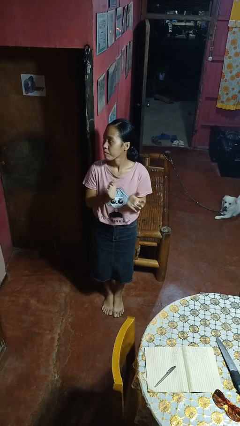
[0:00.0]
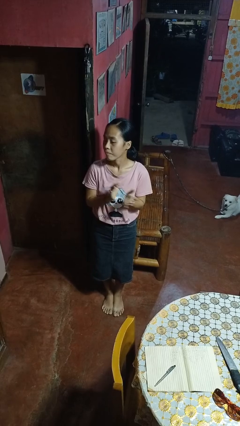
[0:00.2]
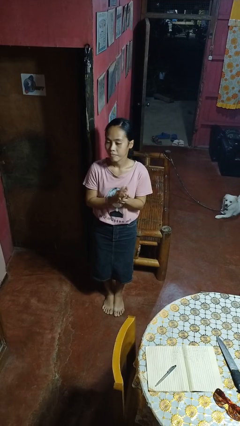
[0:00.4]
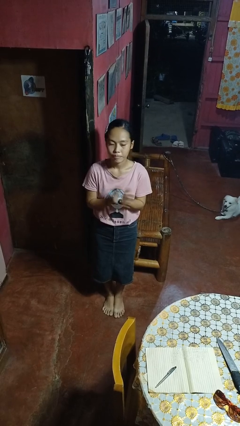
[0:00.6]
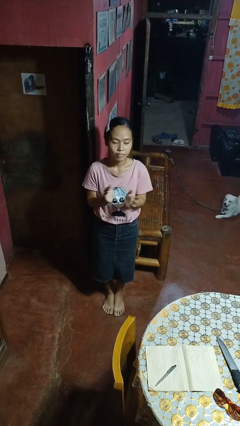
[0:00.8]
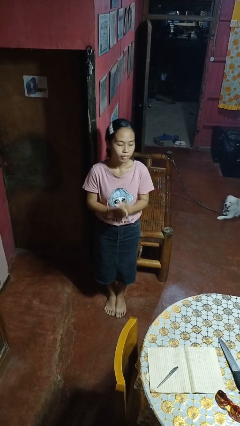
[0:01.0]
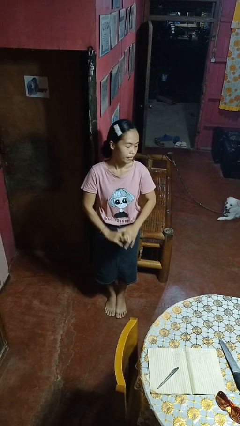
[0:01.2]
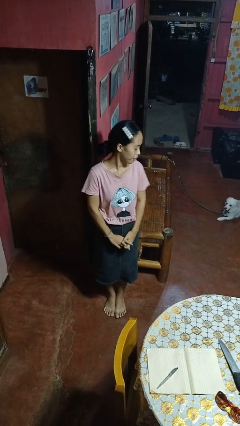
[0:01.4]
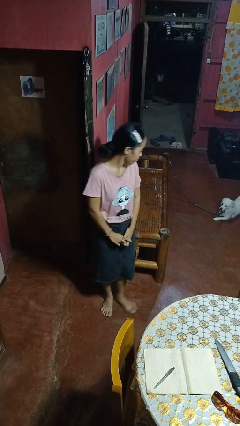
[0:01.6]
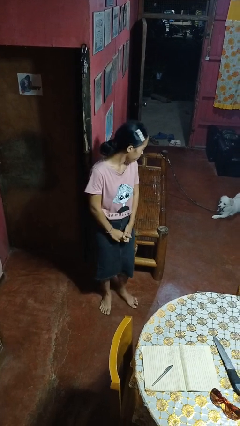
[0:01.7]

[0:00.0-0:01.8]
person claps hands

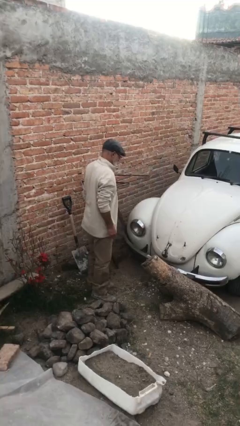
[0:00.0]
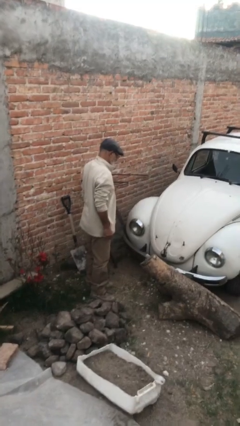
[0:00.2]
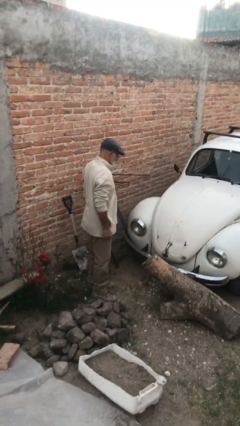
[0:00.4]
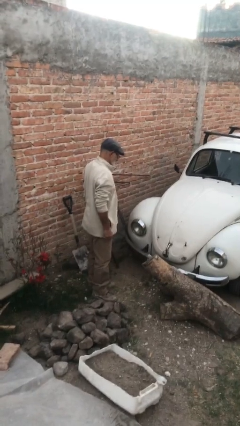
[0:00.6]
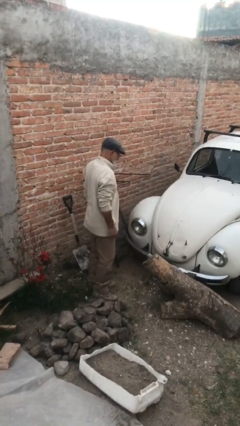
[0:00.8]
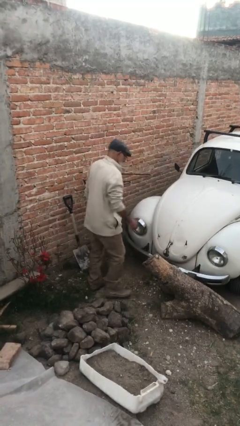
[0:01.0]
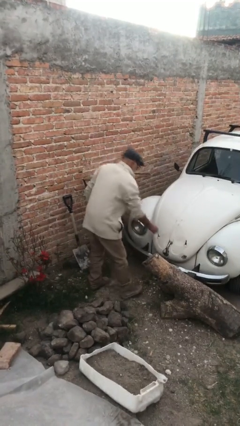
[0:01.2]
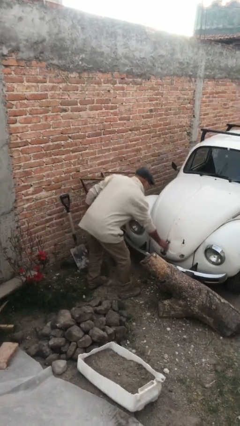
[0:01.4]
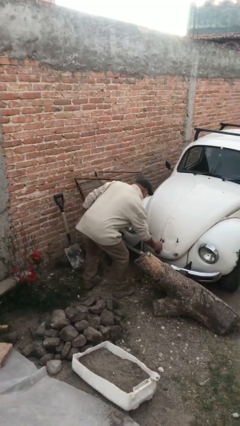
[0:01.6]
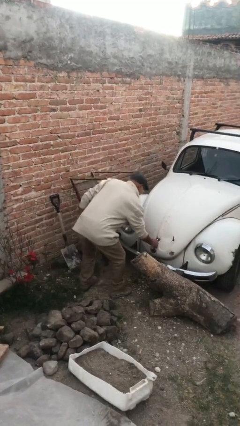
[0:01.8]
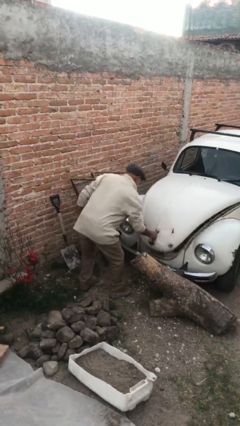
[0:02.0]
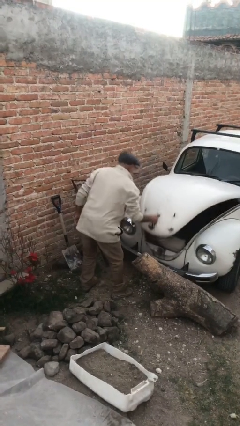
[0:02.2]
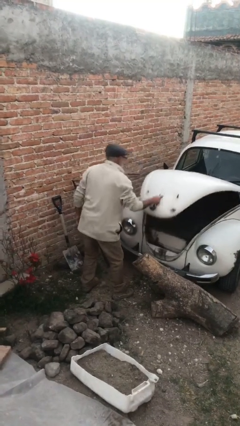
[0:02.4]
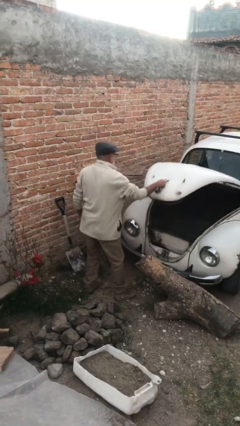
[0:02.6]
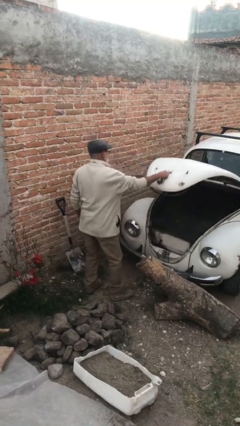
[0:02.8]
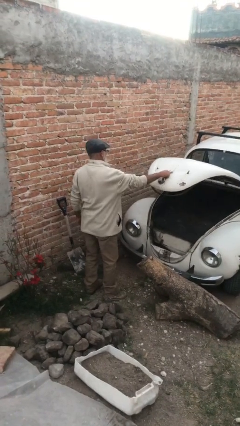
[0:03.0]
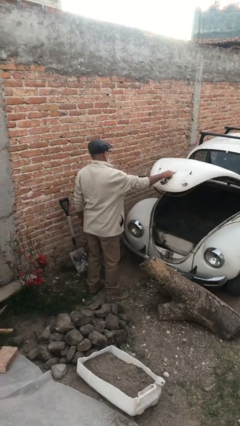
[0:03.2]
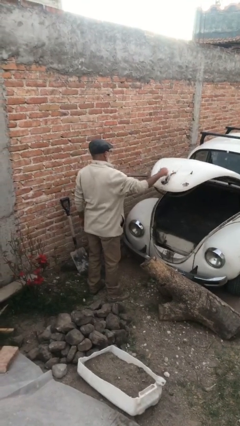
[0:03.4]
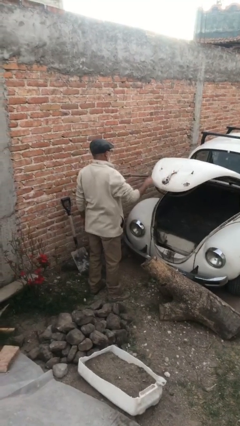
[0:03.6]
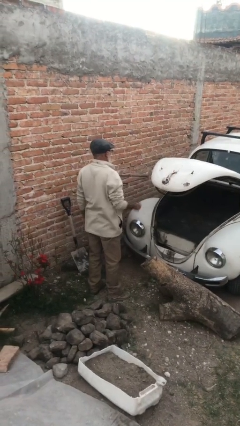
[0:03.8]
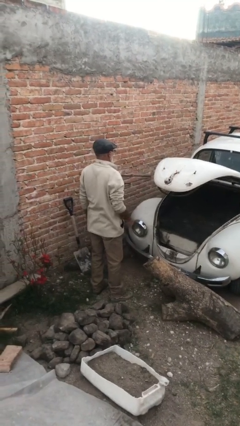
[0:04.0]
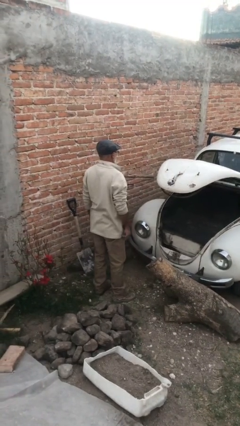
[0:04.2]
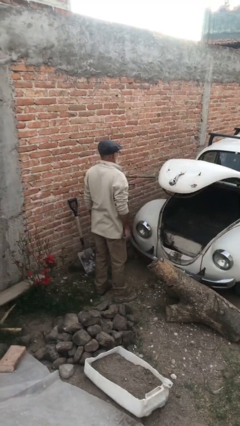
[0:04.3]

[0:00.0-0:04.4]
person opens car trunk

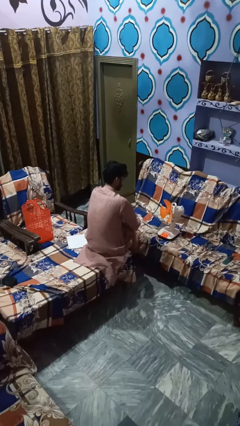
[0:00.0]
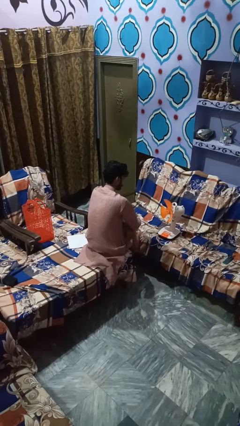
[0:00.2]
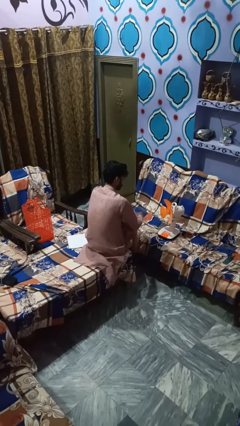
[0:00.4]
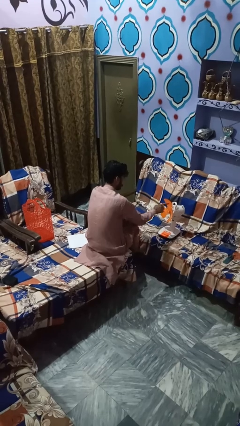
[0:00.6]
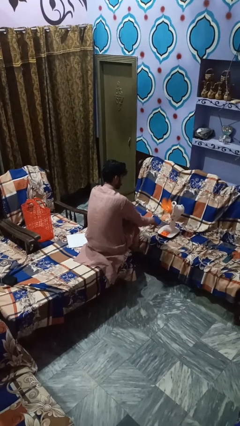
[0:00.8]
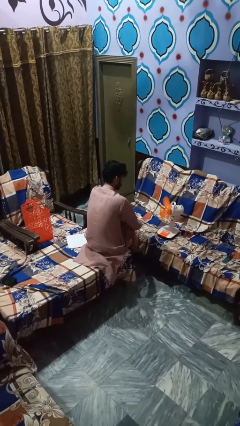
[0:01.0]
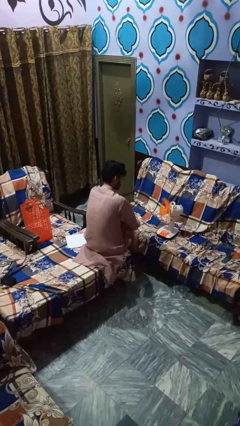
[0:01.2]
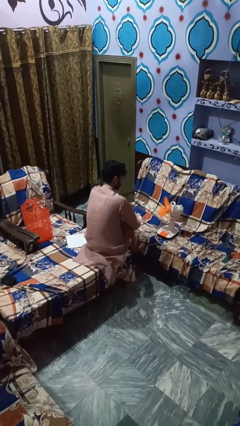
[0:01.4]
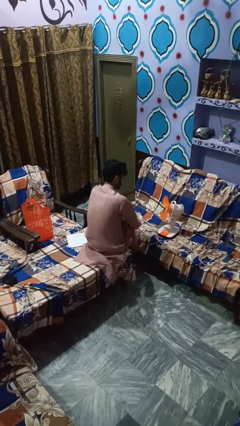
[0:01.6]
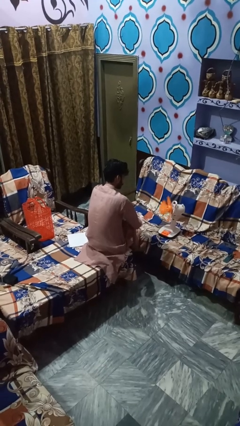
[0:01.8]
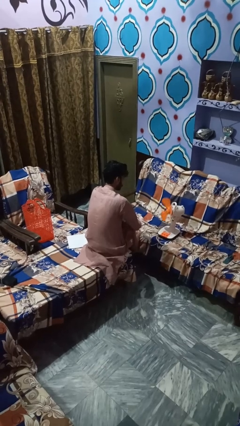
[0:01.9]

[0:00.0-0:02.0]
person turns on fan

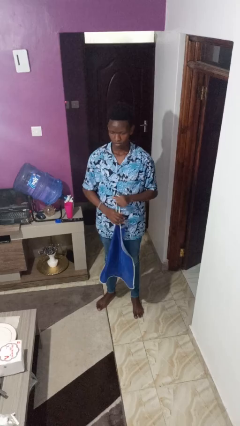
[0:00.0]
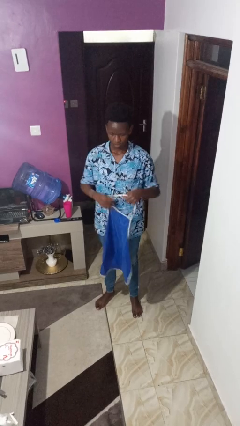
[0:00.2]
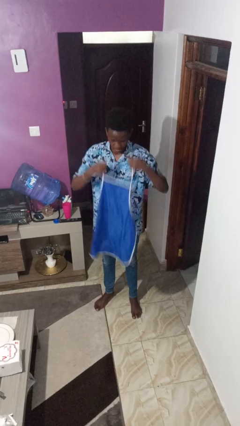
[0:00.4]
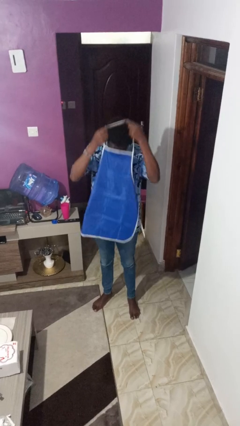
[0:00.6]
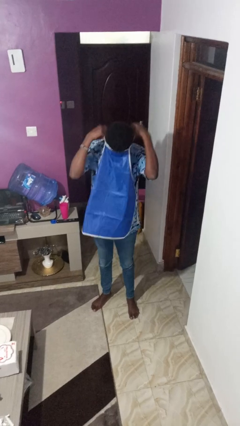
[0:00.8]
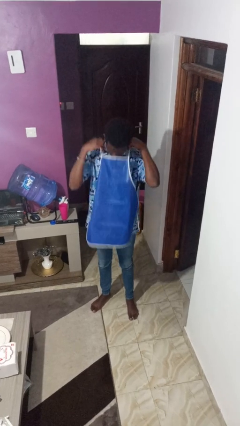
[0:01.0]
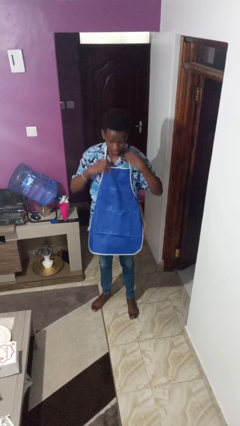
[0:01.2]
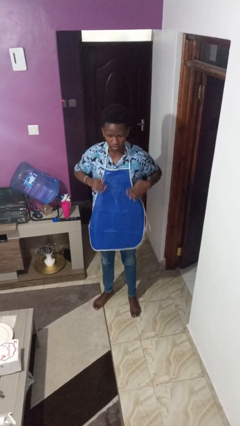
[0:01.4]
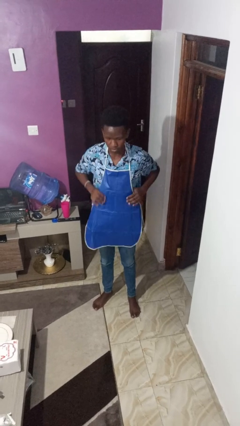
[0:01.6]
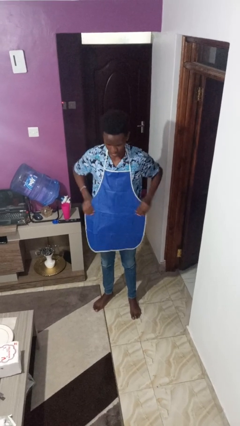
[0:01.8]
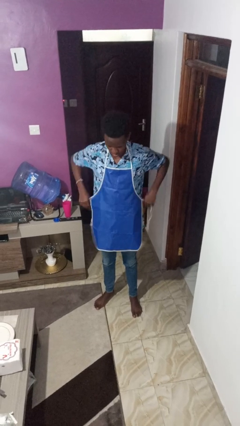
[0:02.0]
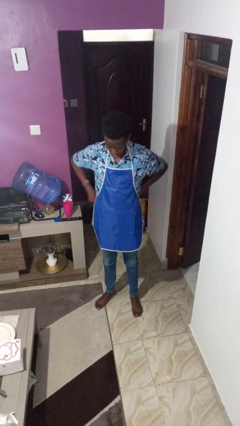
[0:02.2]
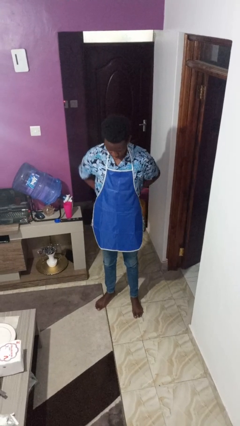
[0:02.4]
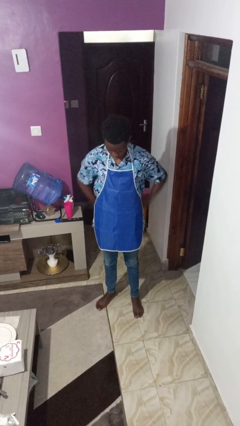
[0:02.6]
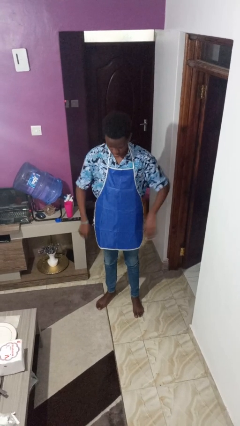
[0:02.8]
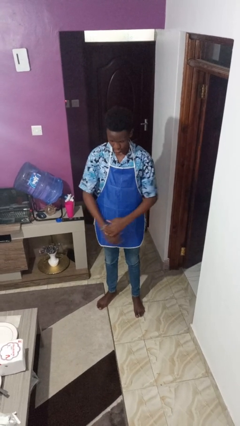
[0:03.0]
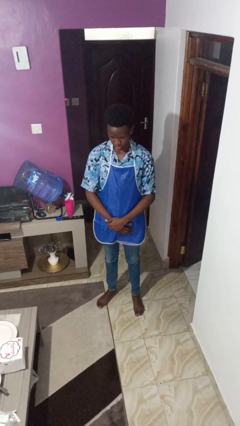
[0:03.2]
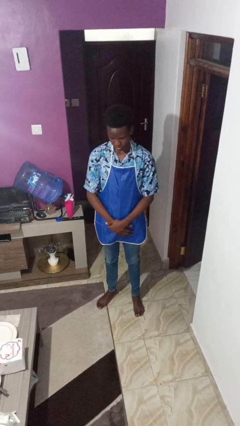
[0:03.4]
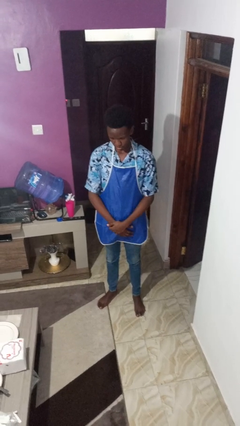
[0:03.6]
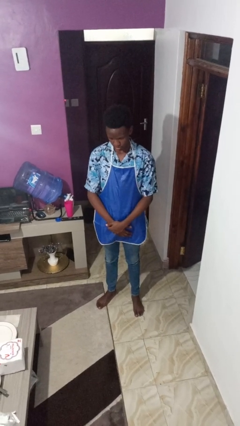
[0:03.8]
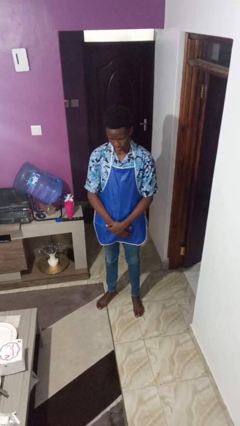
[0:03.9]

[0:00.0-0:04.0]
person puts on apron

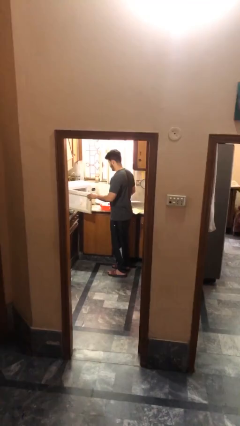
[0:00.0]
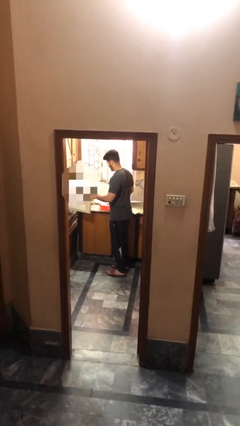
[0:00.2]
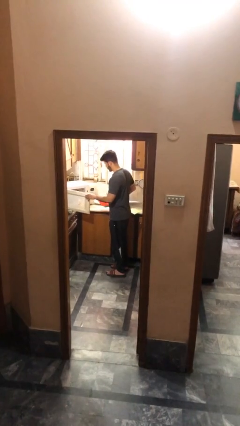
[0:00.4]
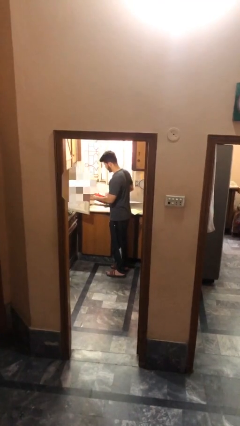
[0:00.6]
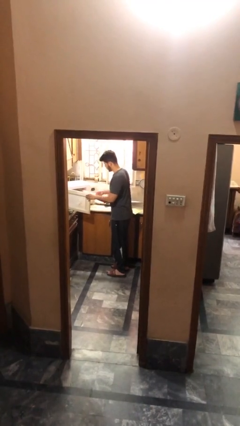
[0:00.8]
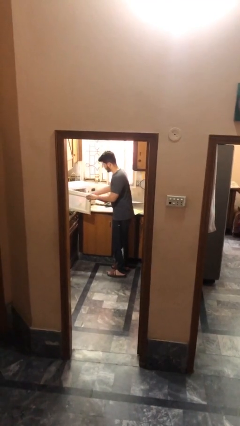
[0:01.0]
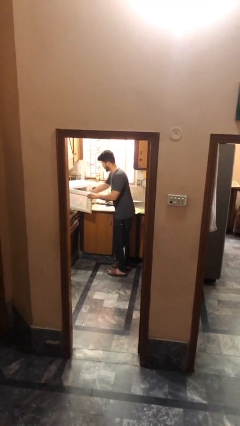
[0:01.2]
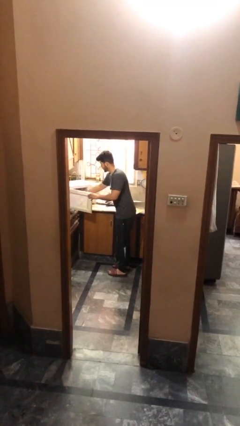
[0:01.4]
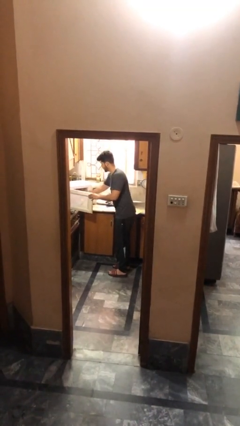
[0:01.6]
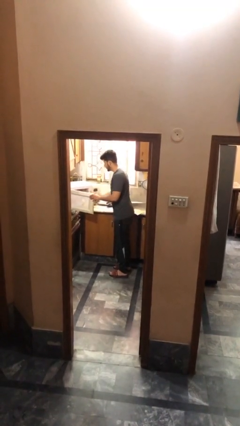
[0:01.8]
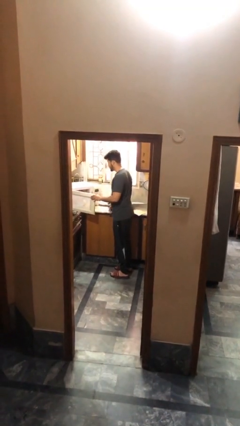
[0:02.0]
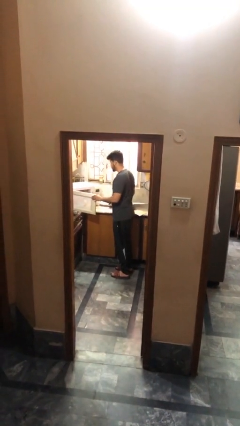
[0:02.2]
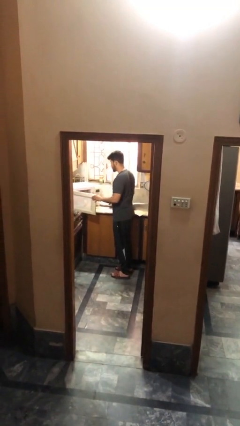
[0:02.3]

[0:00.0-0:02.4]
person puts object into microwave

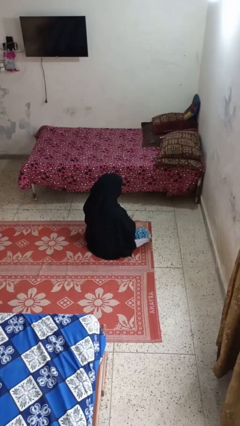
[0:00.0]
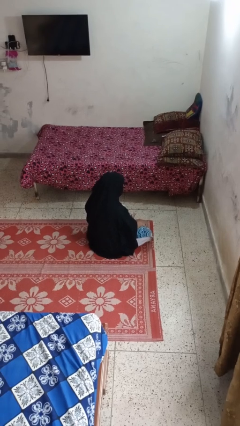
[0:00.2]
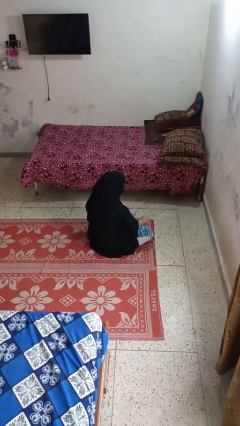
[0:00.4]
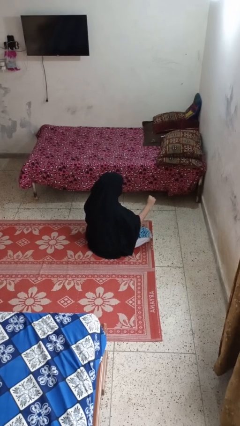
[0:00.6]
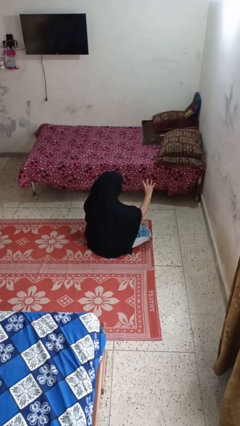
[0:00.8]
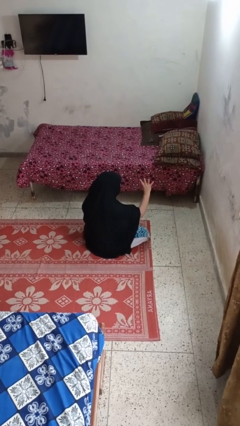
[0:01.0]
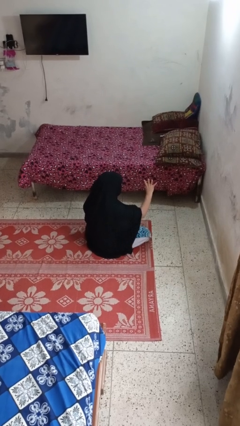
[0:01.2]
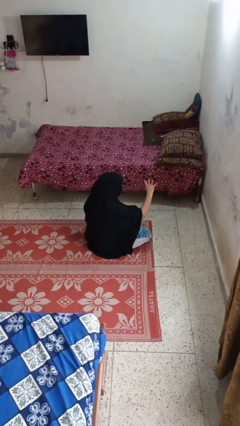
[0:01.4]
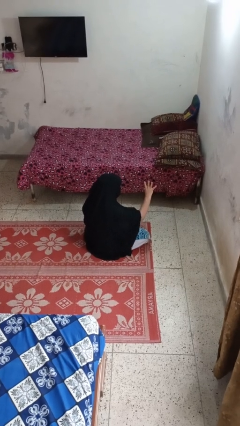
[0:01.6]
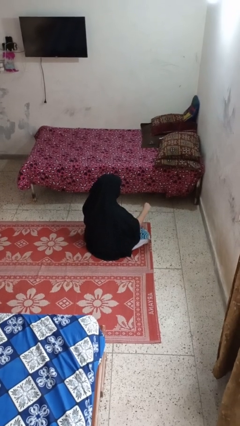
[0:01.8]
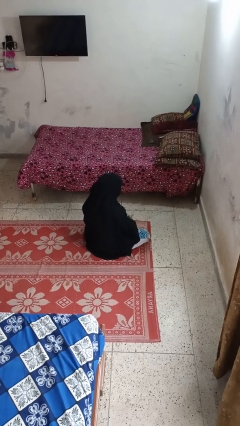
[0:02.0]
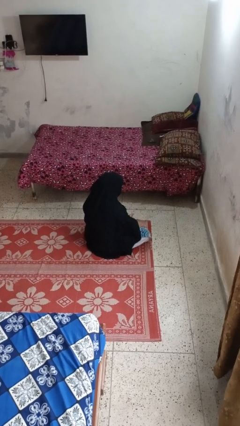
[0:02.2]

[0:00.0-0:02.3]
person gestures number four
